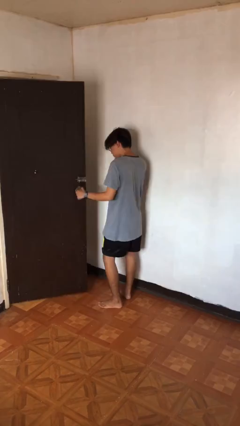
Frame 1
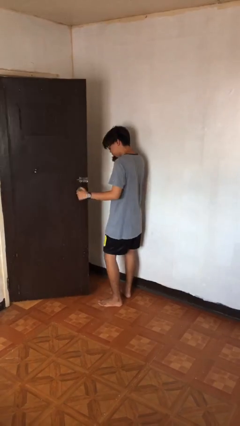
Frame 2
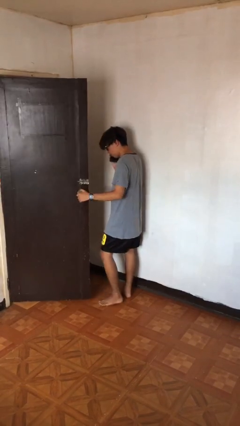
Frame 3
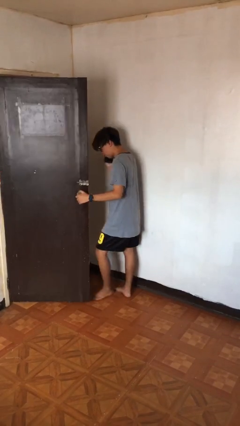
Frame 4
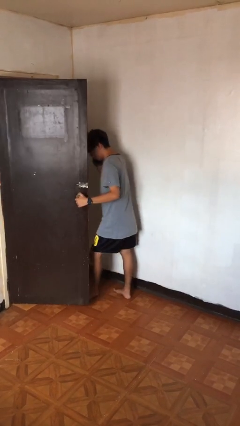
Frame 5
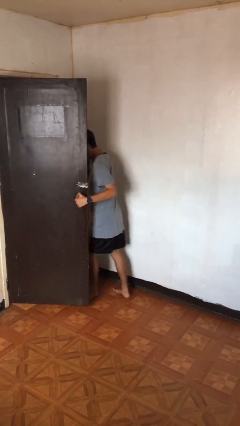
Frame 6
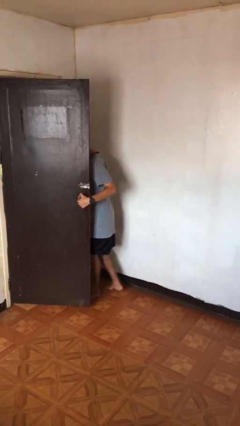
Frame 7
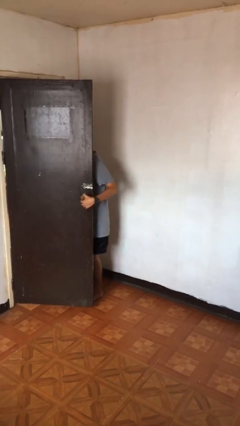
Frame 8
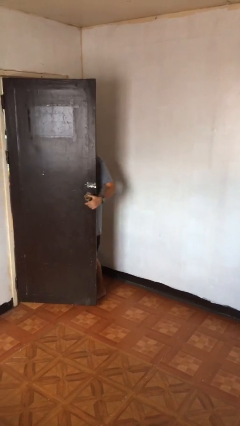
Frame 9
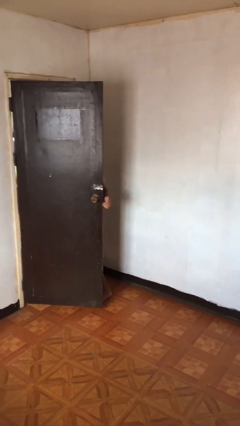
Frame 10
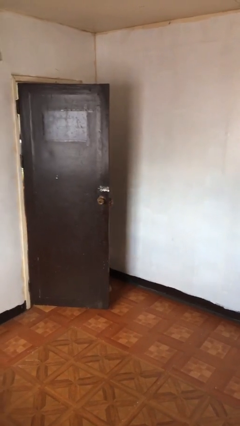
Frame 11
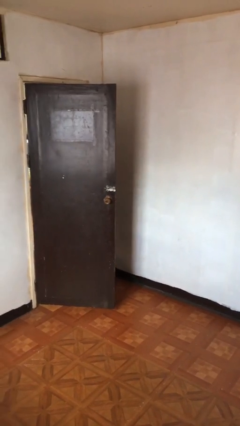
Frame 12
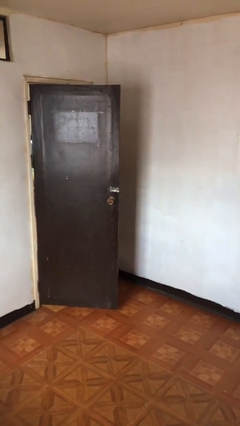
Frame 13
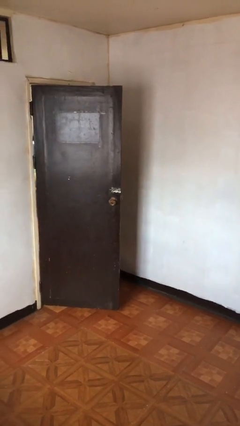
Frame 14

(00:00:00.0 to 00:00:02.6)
person exits scene through structure

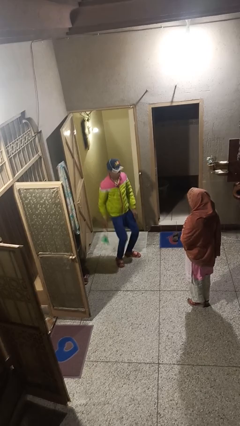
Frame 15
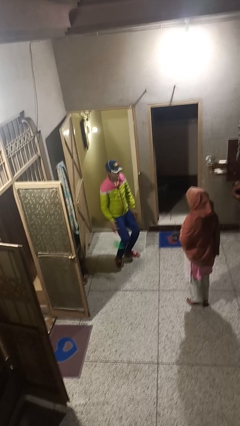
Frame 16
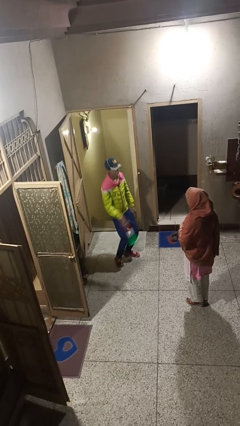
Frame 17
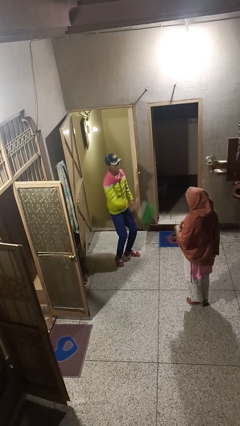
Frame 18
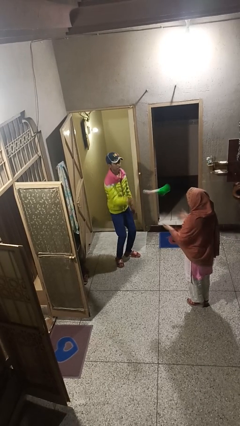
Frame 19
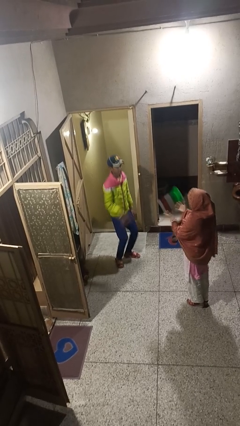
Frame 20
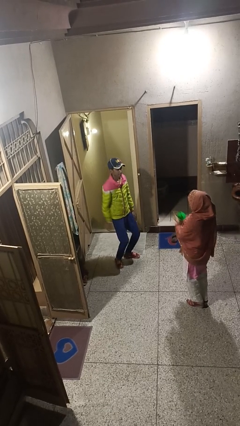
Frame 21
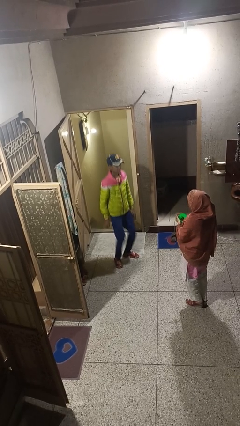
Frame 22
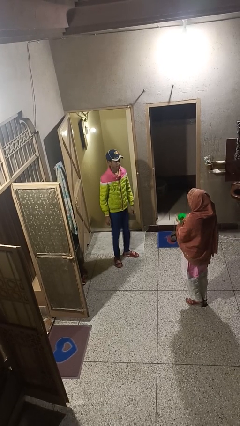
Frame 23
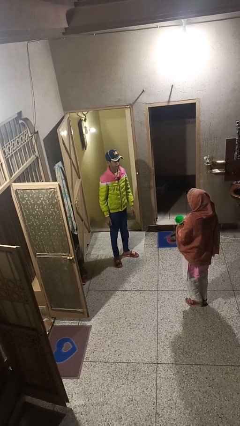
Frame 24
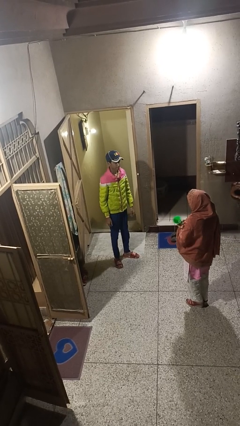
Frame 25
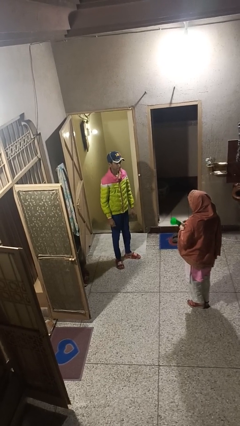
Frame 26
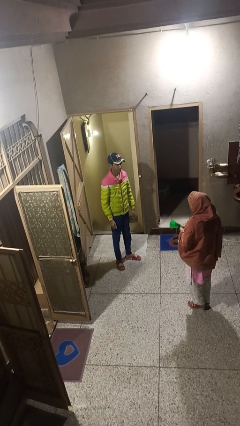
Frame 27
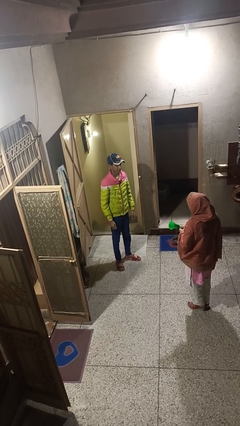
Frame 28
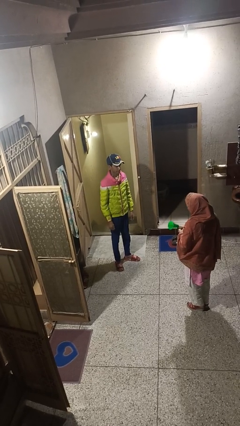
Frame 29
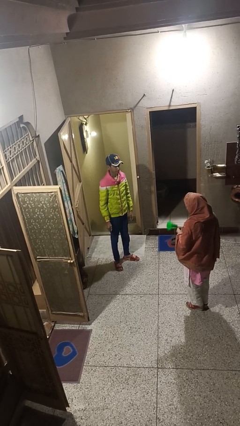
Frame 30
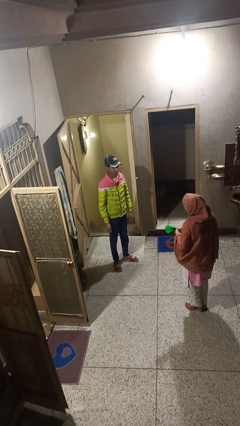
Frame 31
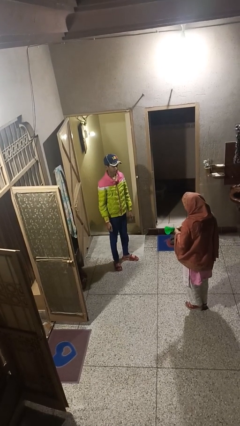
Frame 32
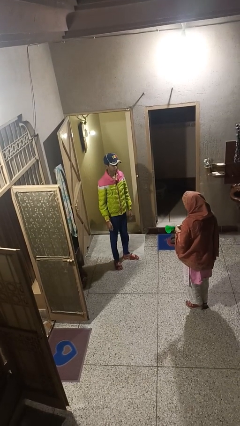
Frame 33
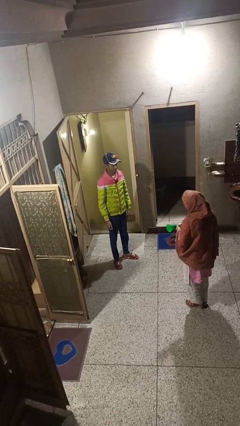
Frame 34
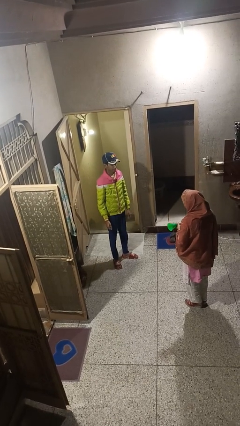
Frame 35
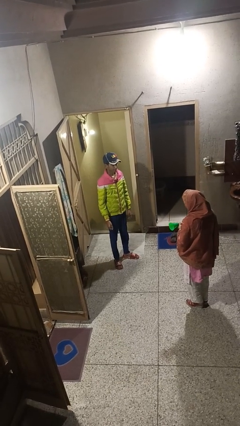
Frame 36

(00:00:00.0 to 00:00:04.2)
person throws object to person

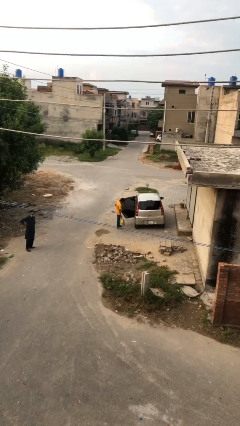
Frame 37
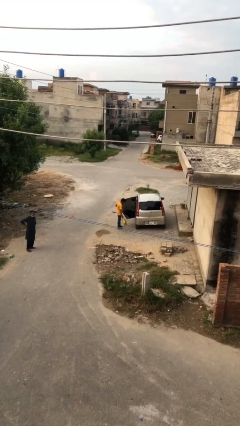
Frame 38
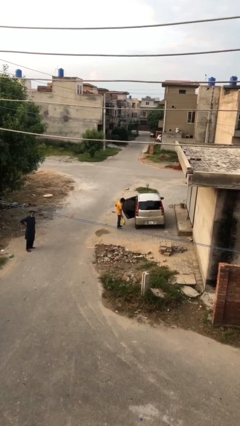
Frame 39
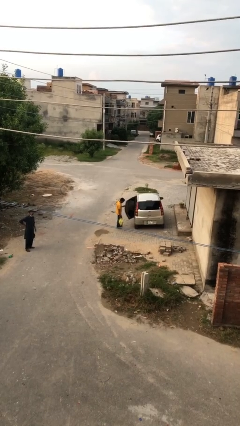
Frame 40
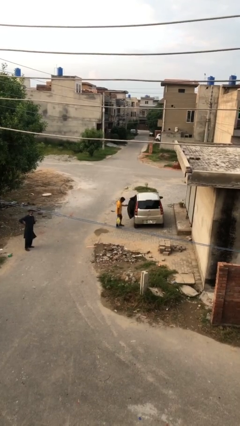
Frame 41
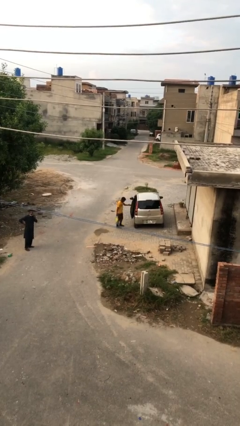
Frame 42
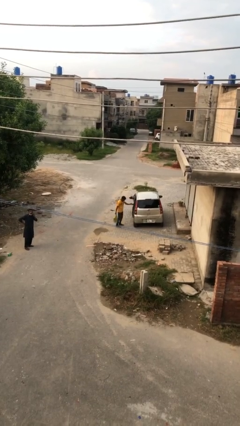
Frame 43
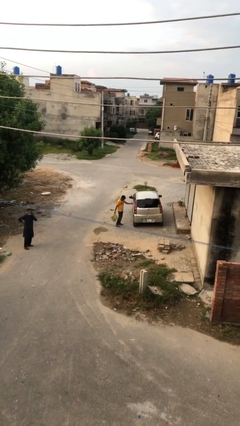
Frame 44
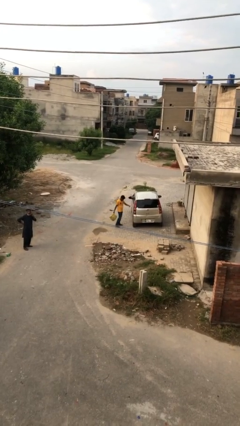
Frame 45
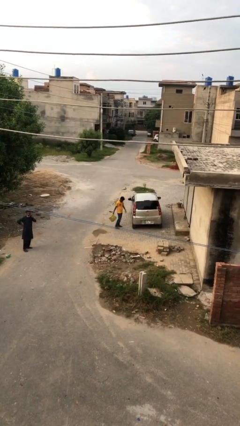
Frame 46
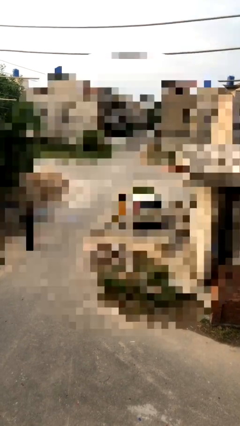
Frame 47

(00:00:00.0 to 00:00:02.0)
person closes car door

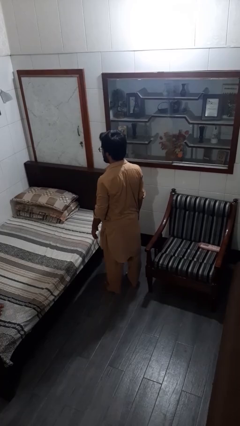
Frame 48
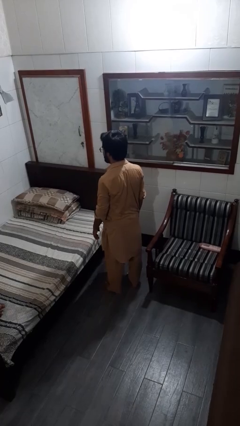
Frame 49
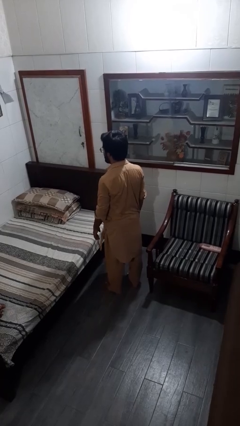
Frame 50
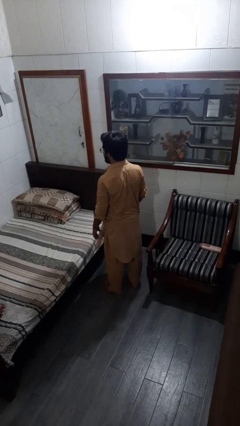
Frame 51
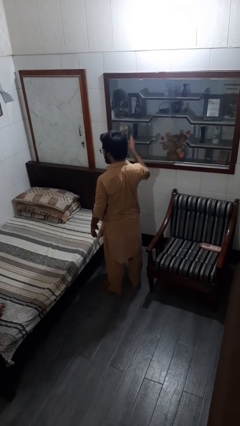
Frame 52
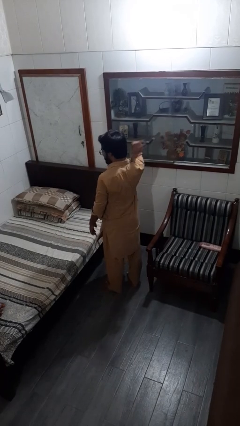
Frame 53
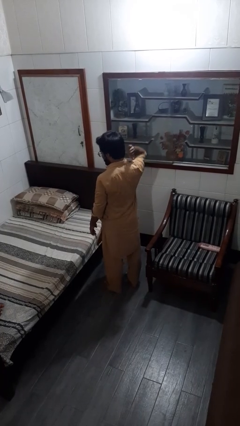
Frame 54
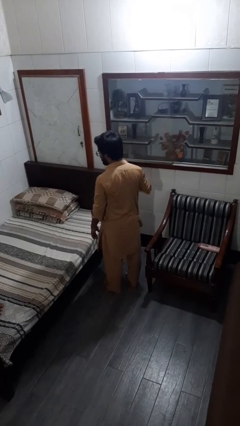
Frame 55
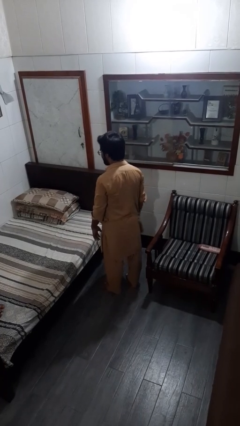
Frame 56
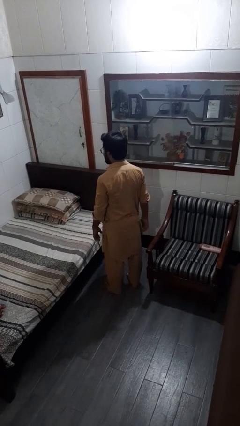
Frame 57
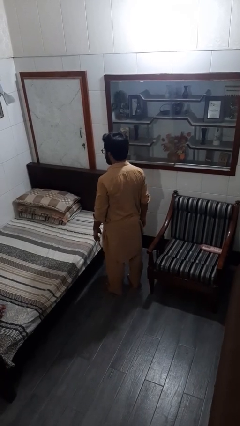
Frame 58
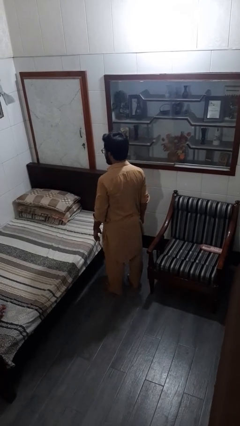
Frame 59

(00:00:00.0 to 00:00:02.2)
person swats bug

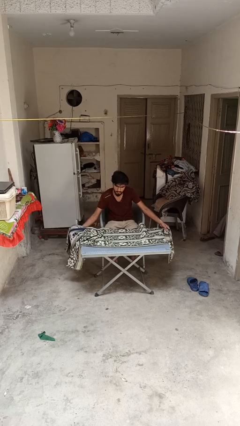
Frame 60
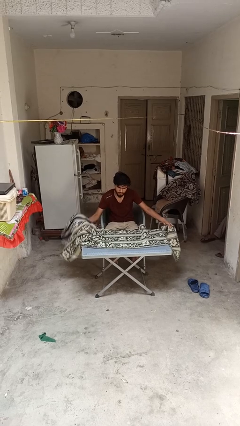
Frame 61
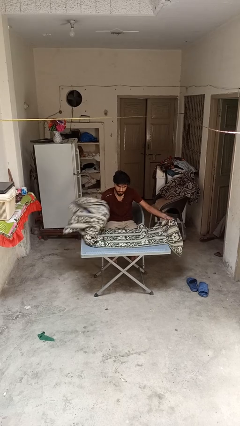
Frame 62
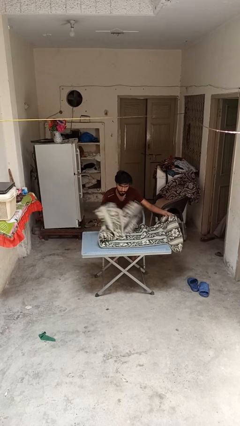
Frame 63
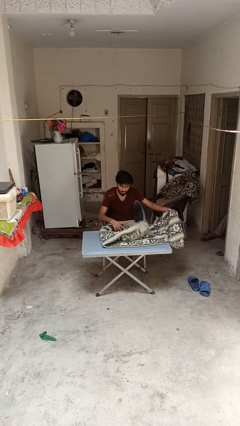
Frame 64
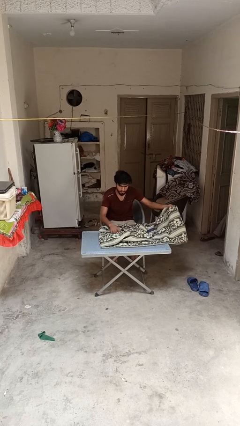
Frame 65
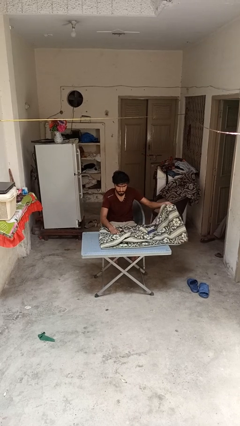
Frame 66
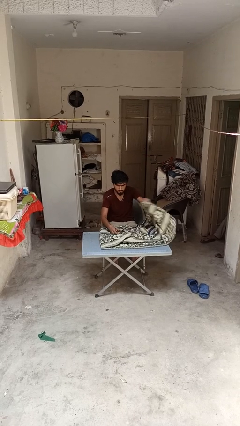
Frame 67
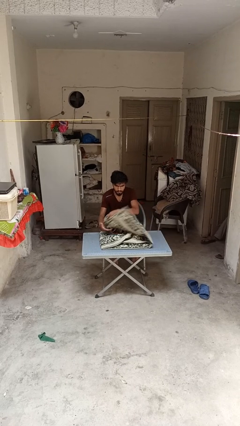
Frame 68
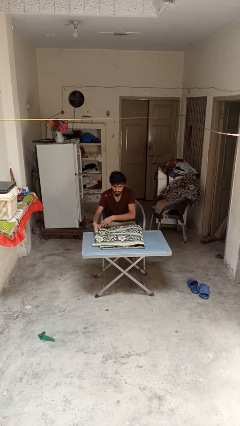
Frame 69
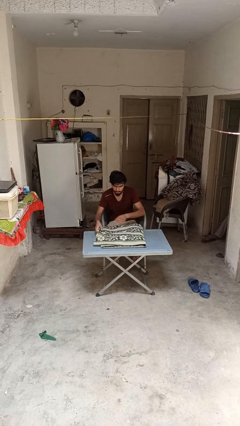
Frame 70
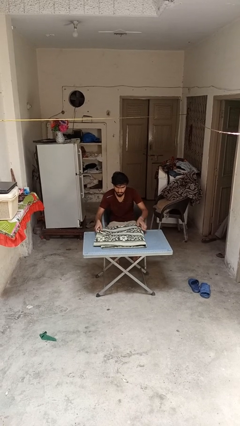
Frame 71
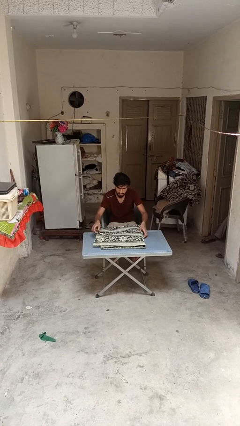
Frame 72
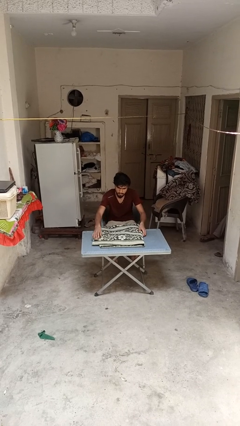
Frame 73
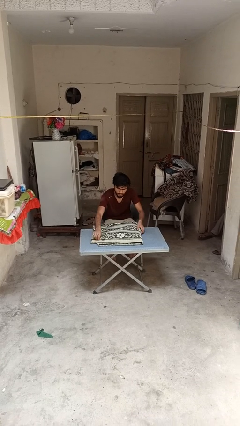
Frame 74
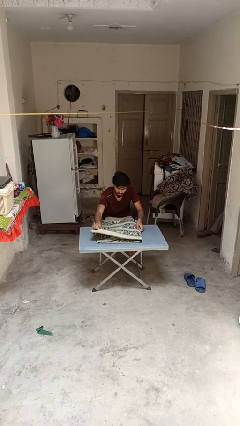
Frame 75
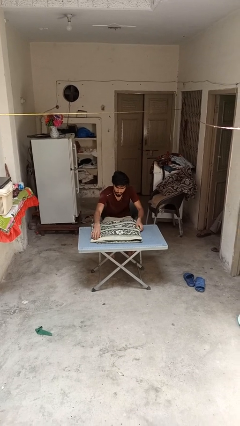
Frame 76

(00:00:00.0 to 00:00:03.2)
person folds tablecloth

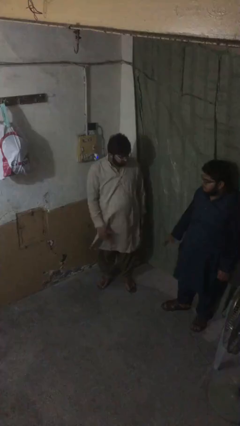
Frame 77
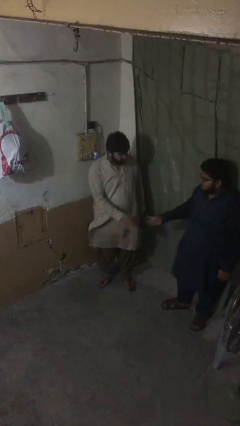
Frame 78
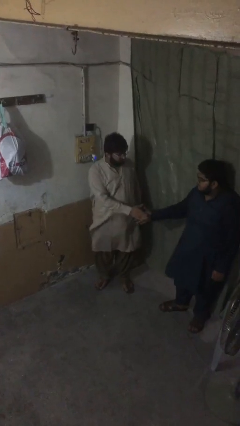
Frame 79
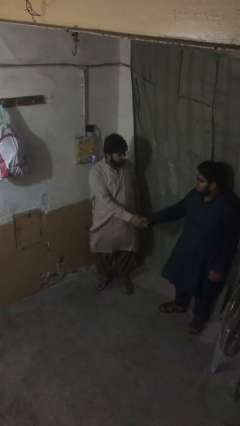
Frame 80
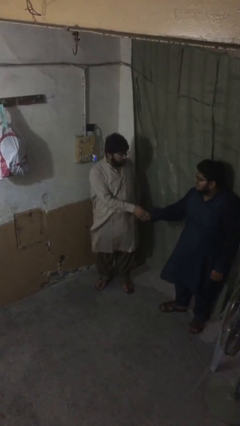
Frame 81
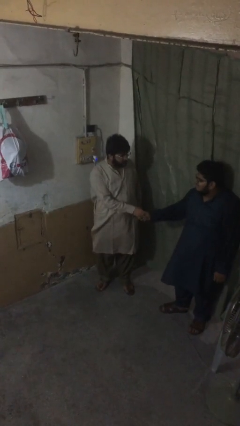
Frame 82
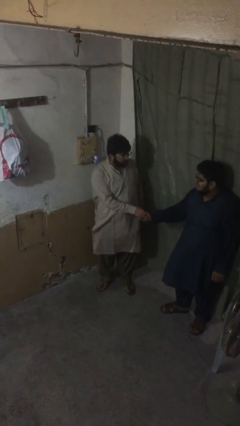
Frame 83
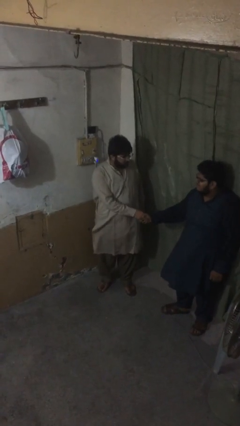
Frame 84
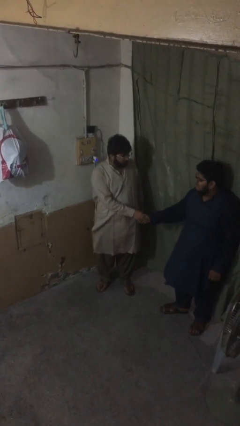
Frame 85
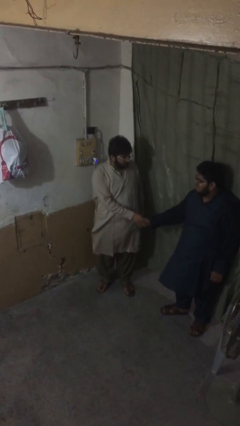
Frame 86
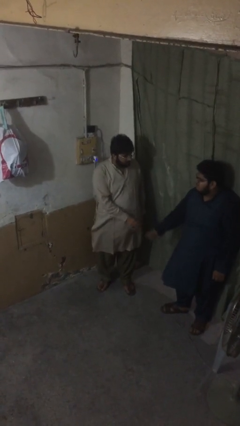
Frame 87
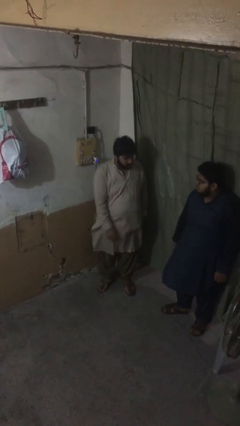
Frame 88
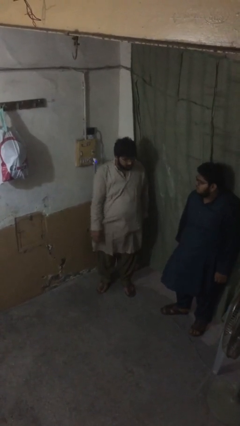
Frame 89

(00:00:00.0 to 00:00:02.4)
person shakes hand

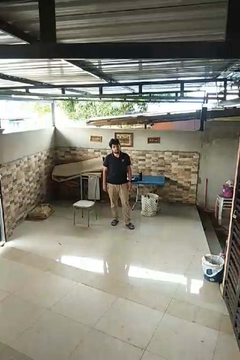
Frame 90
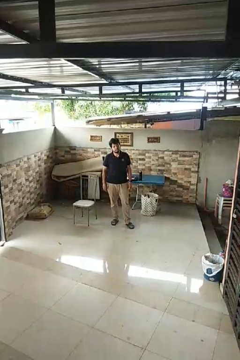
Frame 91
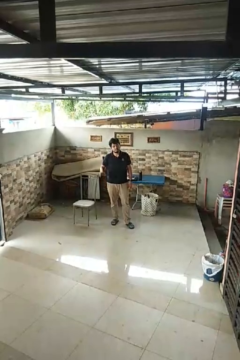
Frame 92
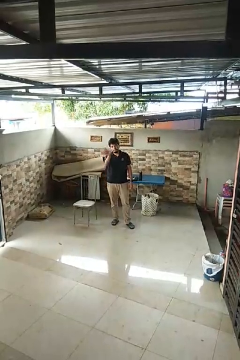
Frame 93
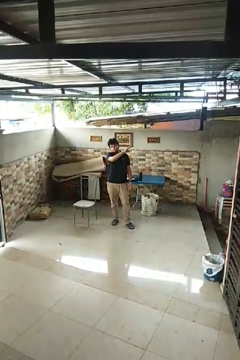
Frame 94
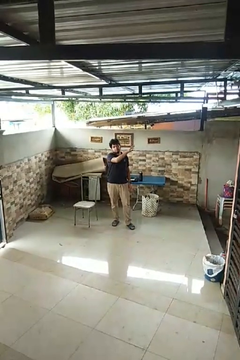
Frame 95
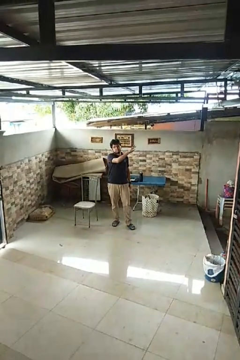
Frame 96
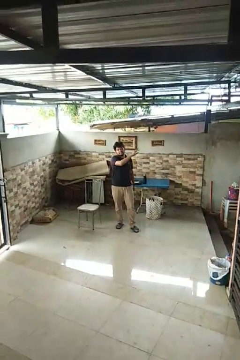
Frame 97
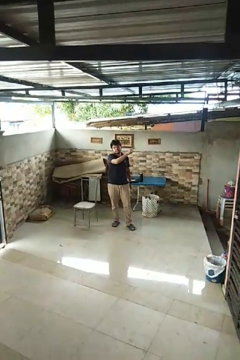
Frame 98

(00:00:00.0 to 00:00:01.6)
person gestures swipe left
